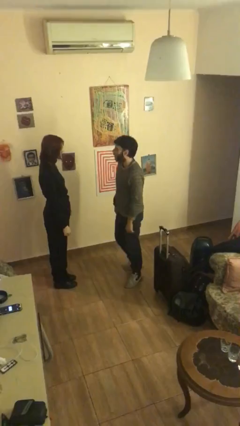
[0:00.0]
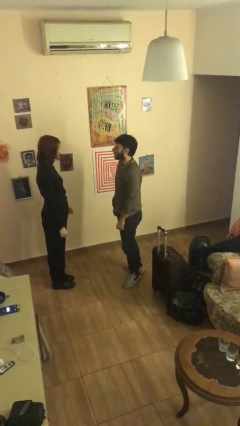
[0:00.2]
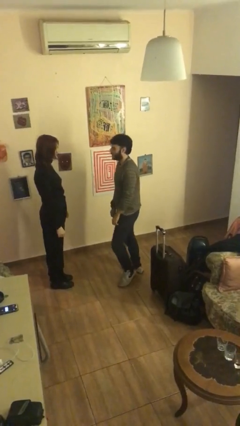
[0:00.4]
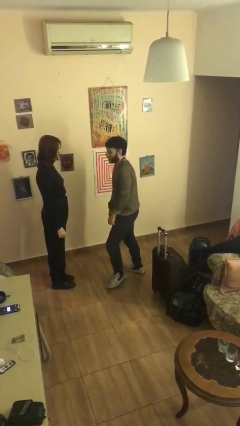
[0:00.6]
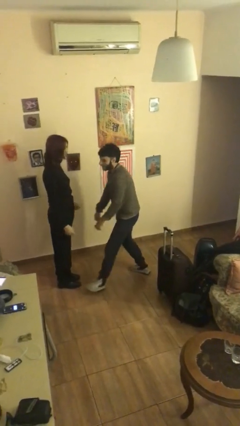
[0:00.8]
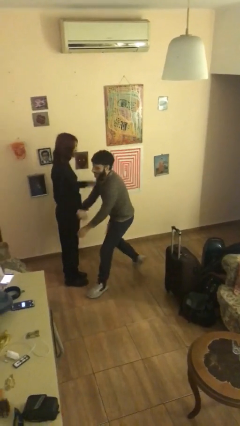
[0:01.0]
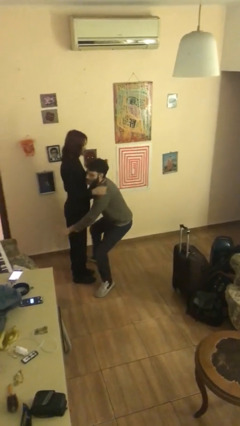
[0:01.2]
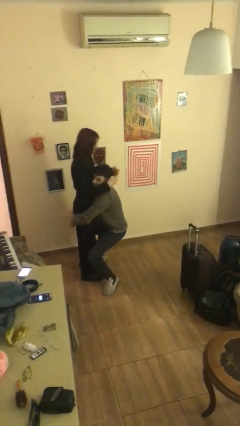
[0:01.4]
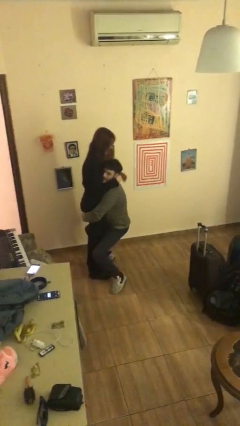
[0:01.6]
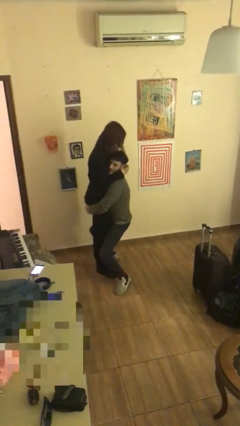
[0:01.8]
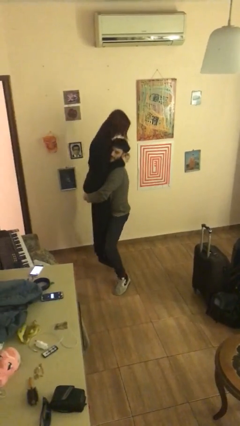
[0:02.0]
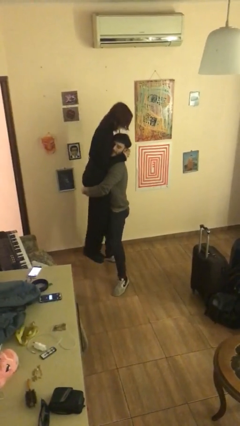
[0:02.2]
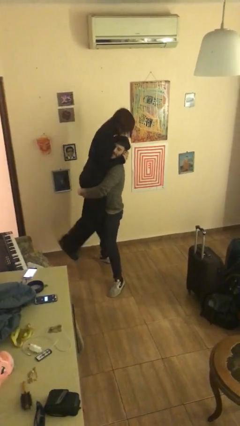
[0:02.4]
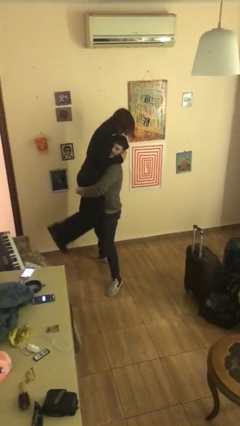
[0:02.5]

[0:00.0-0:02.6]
person picks up person

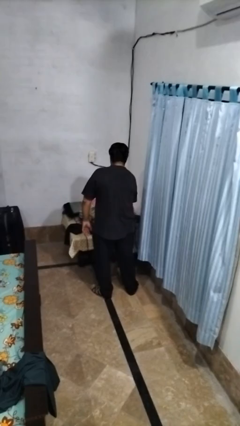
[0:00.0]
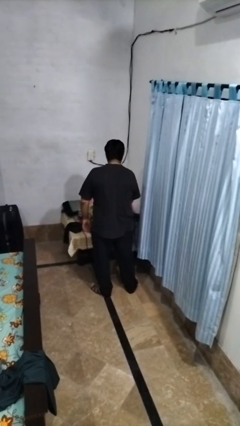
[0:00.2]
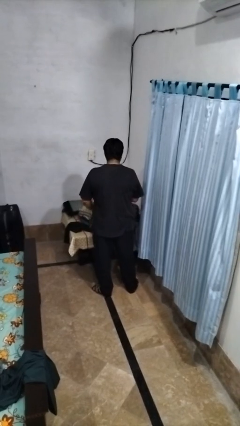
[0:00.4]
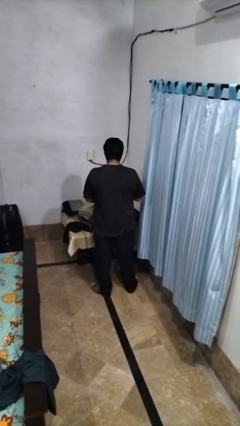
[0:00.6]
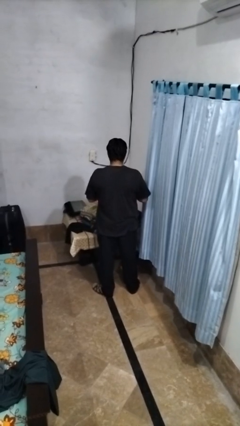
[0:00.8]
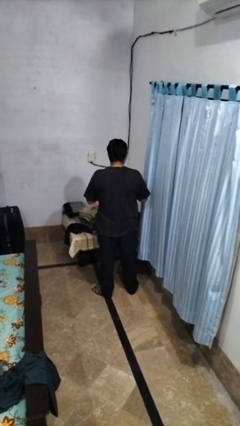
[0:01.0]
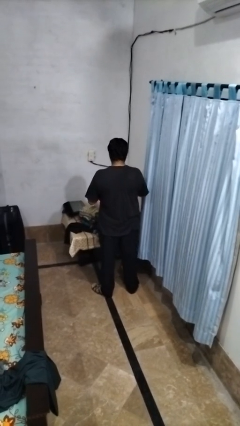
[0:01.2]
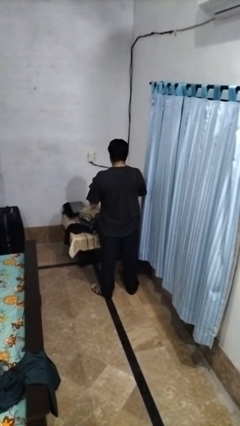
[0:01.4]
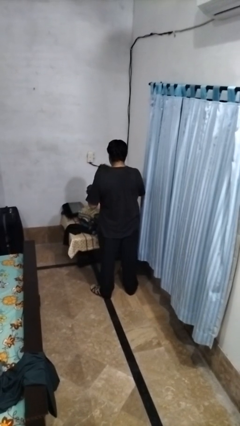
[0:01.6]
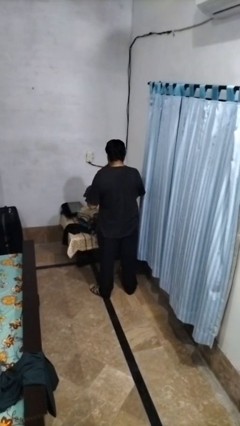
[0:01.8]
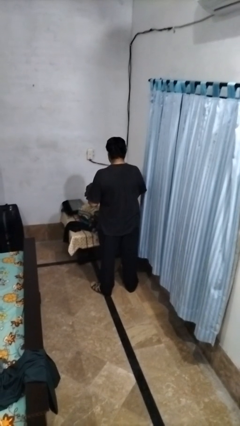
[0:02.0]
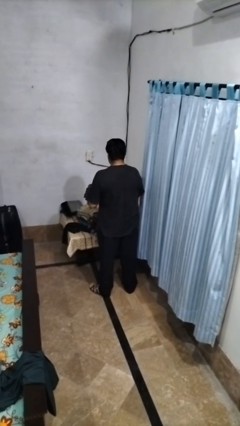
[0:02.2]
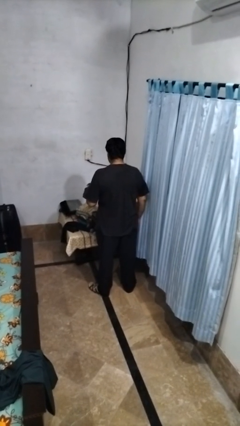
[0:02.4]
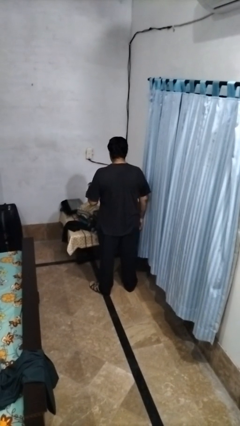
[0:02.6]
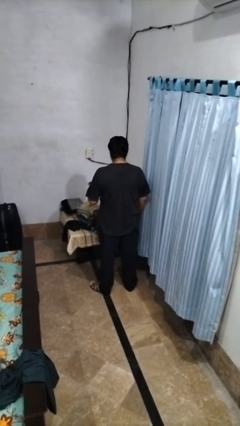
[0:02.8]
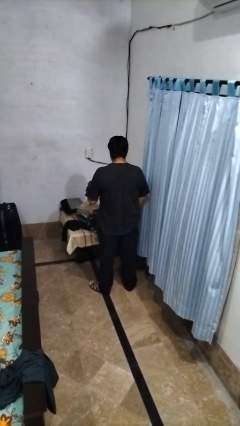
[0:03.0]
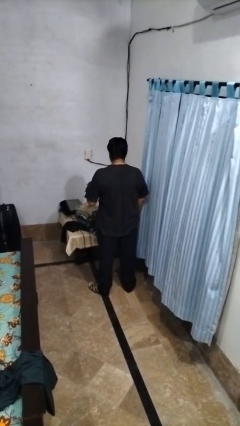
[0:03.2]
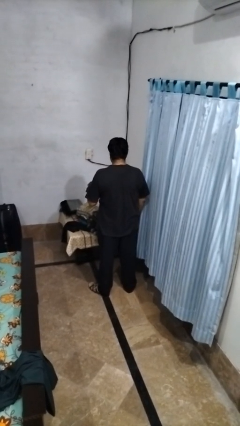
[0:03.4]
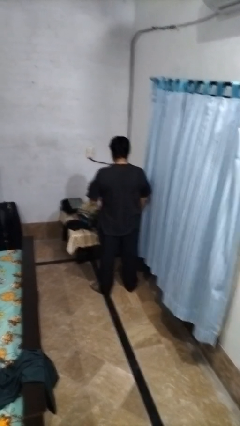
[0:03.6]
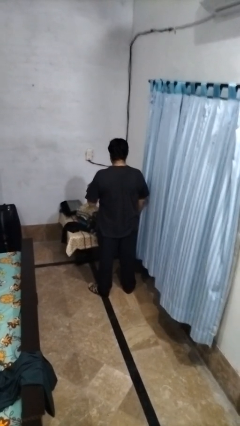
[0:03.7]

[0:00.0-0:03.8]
person loads clothes into suitcase

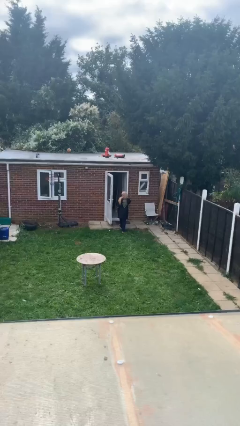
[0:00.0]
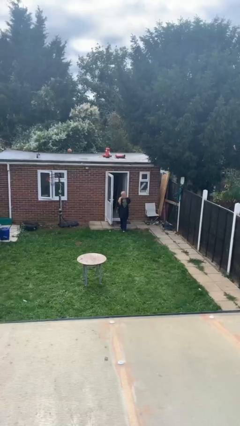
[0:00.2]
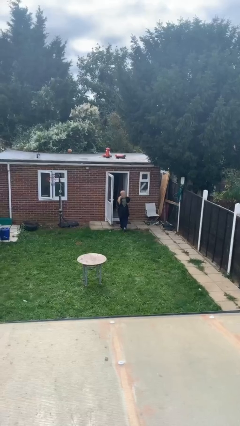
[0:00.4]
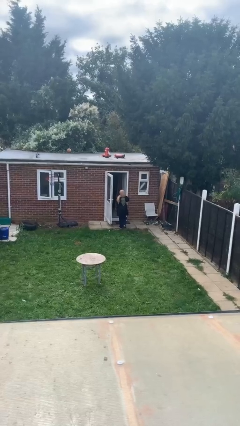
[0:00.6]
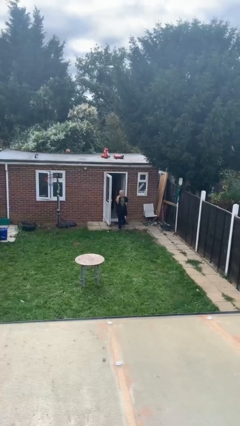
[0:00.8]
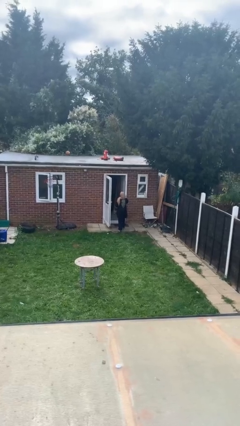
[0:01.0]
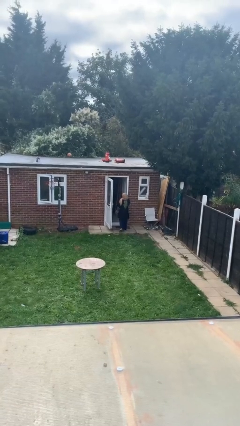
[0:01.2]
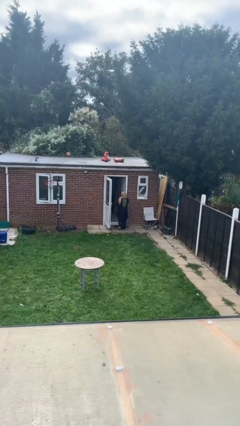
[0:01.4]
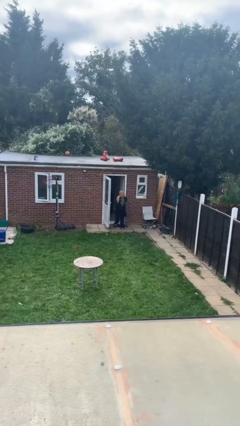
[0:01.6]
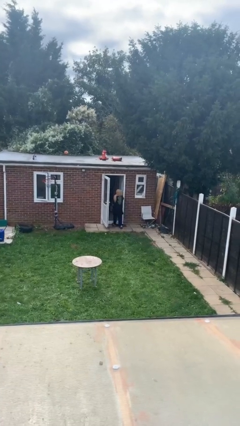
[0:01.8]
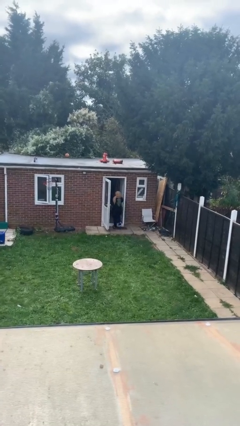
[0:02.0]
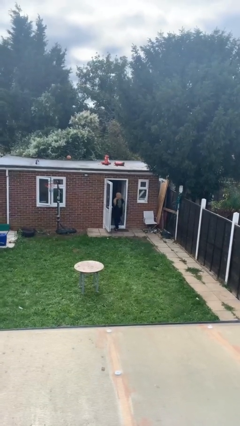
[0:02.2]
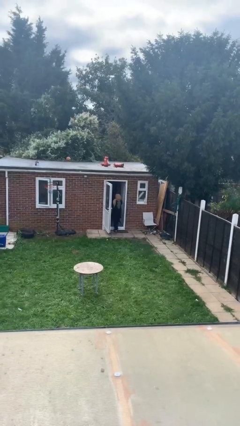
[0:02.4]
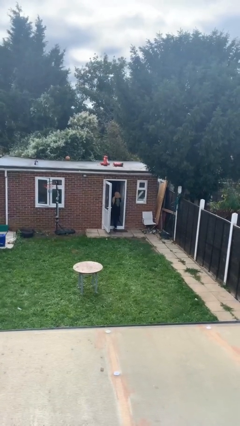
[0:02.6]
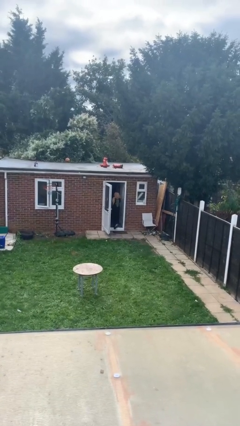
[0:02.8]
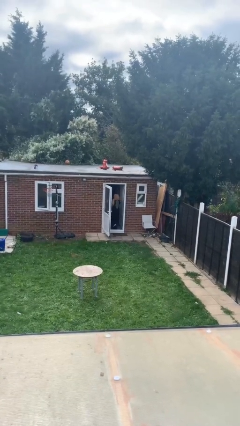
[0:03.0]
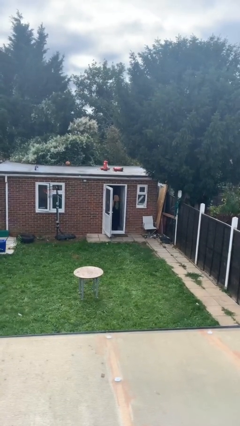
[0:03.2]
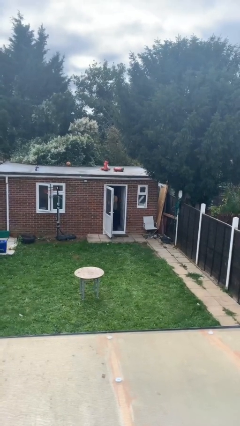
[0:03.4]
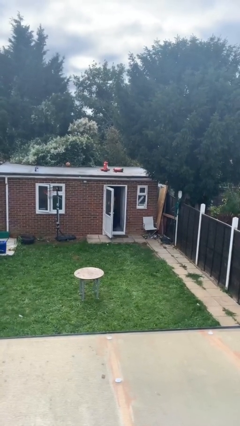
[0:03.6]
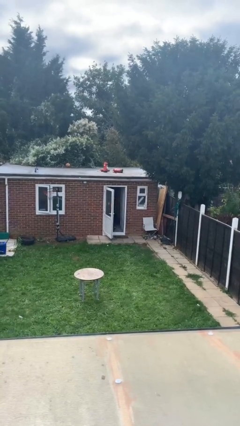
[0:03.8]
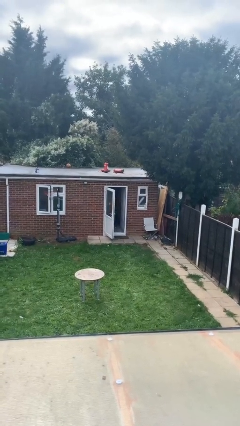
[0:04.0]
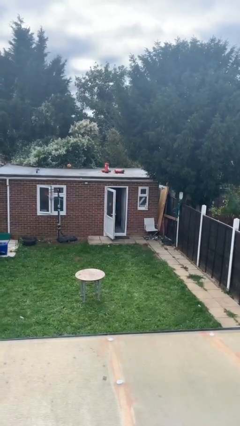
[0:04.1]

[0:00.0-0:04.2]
person exits scene through structure

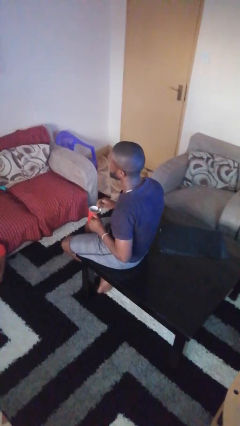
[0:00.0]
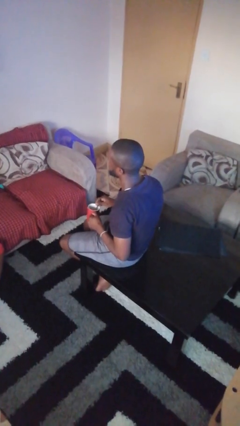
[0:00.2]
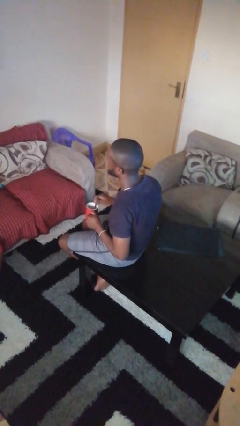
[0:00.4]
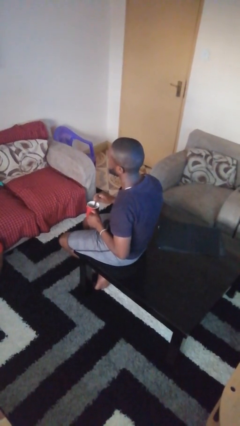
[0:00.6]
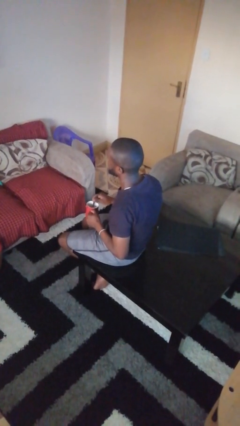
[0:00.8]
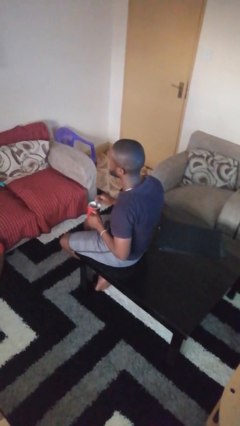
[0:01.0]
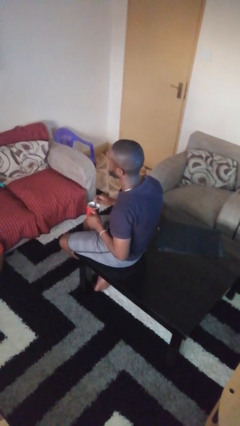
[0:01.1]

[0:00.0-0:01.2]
person stirs mug

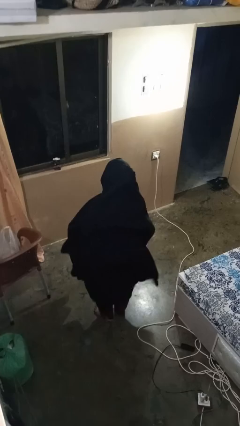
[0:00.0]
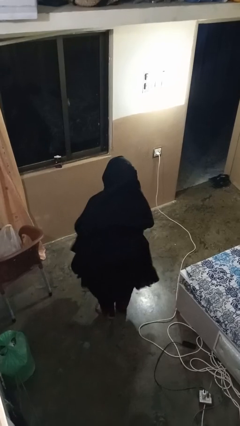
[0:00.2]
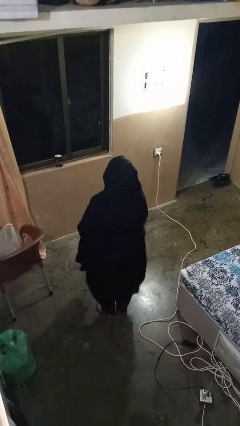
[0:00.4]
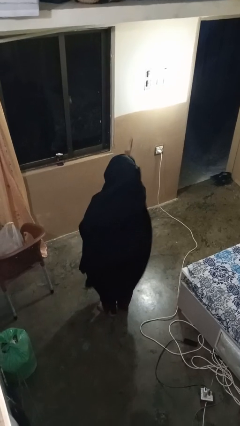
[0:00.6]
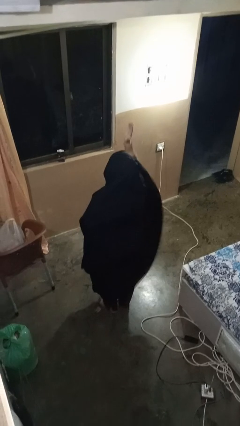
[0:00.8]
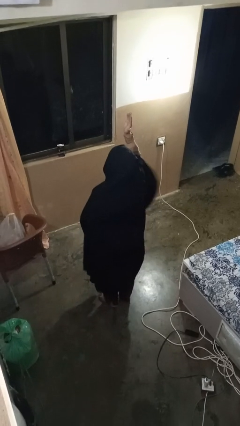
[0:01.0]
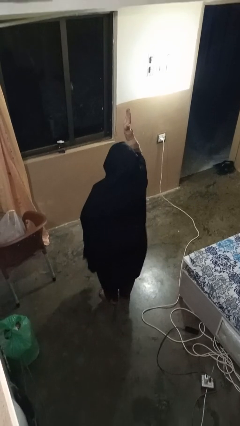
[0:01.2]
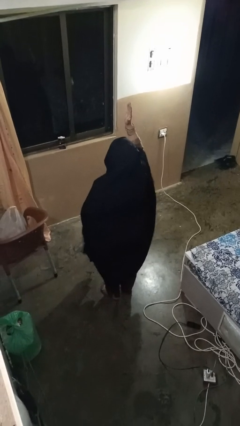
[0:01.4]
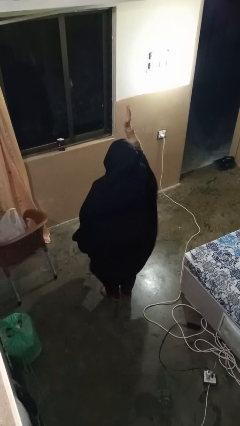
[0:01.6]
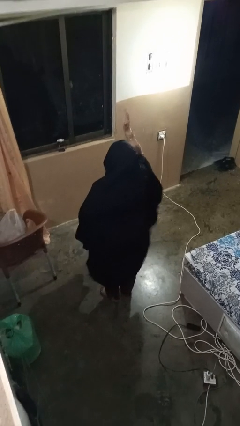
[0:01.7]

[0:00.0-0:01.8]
person gestures raise hand

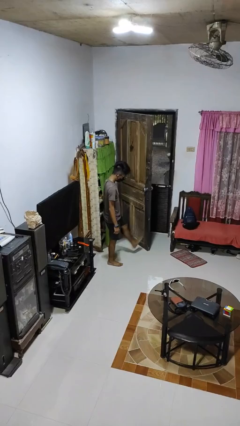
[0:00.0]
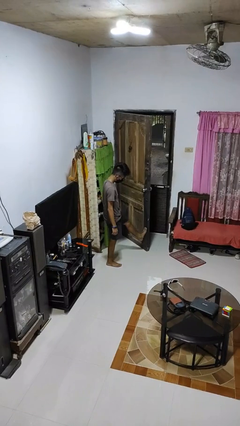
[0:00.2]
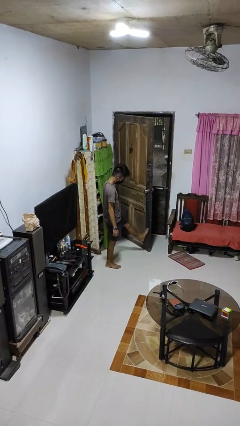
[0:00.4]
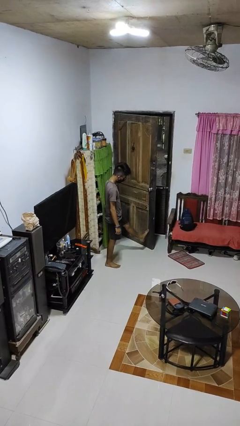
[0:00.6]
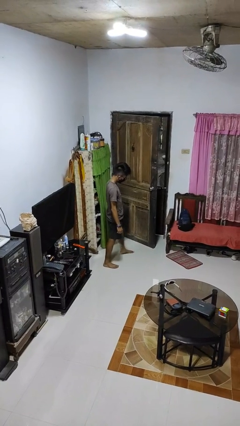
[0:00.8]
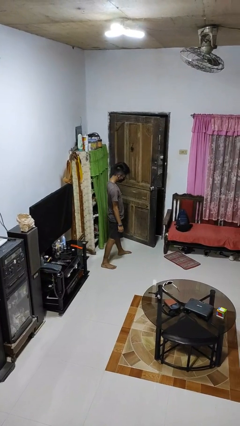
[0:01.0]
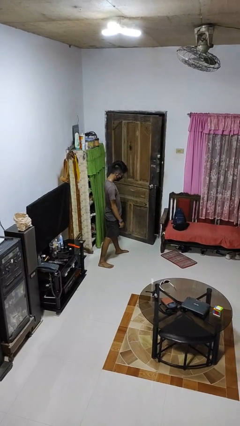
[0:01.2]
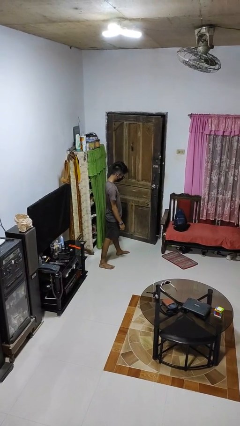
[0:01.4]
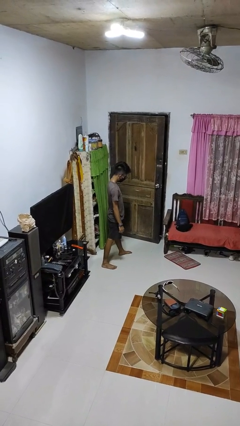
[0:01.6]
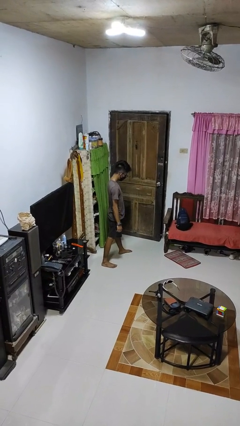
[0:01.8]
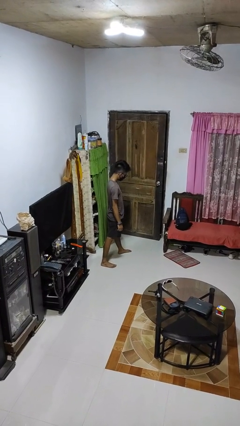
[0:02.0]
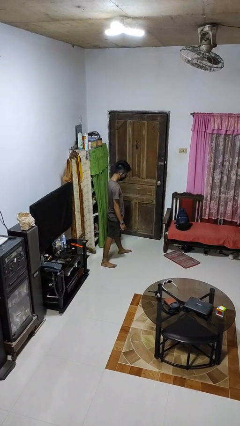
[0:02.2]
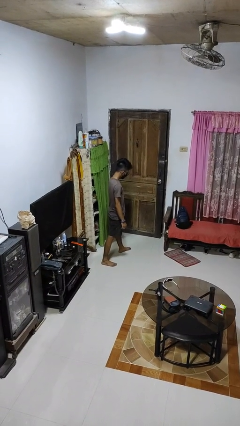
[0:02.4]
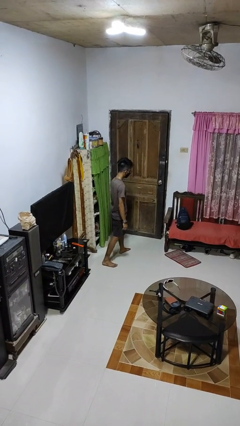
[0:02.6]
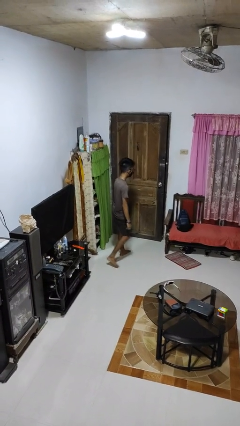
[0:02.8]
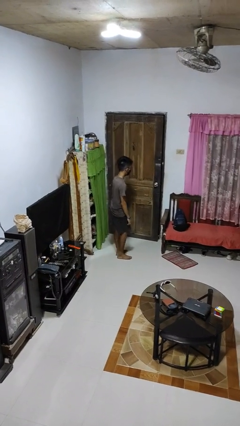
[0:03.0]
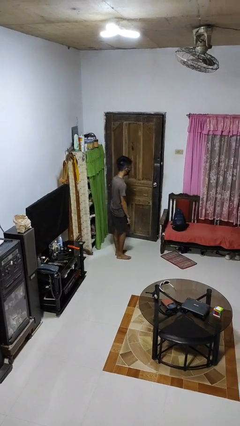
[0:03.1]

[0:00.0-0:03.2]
person closes door with foot

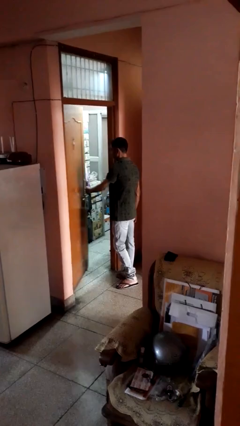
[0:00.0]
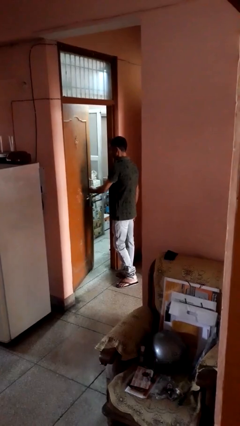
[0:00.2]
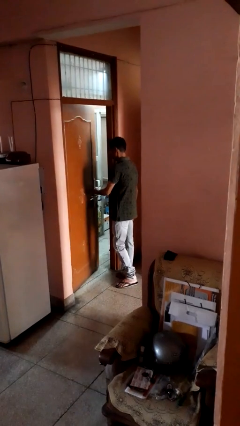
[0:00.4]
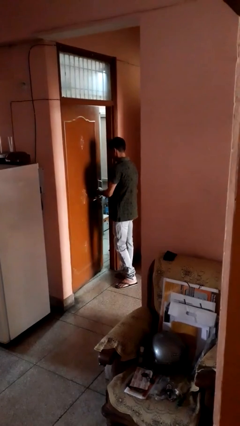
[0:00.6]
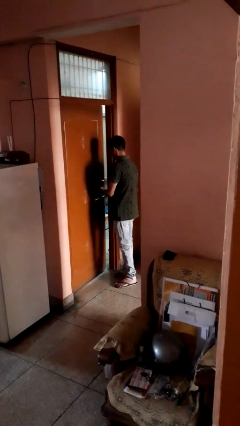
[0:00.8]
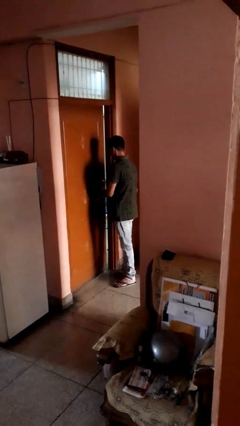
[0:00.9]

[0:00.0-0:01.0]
person closes facility door
